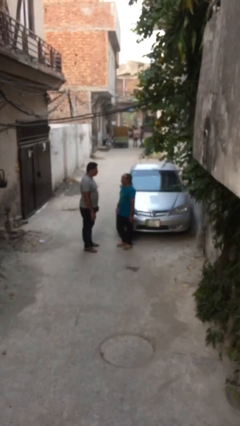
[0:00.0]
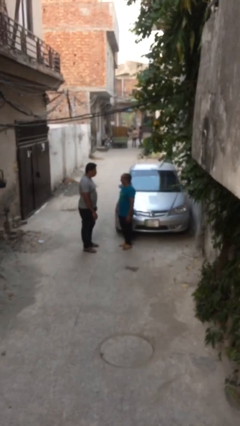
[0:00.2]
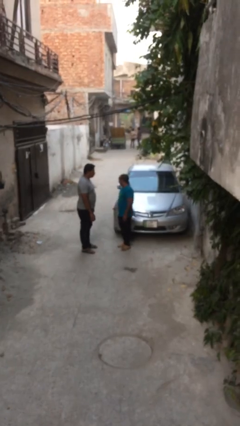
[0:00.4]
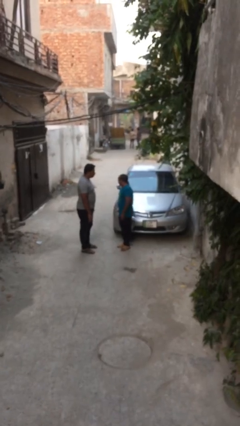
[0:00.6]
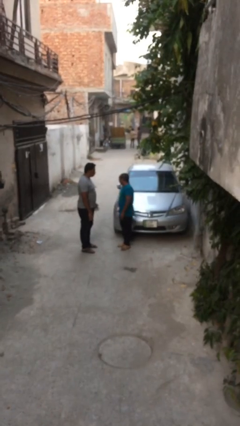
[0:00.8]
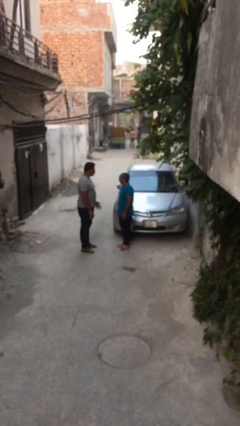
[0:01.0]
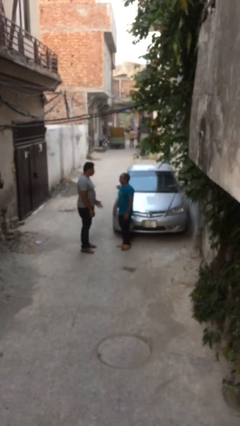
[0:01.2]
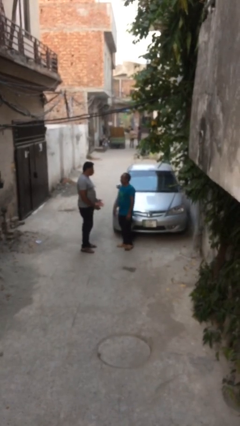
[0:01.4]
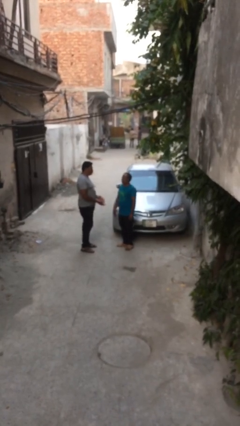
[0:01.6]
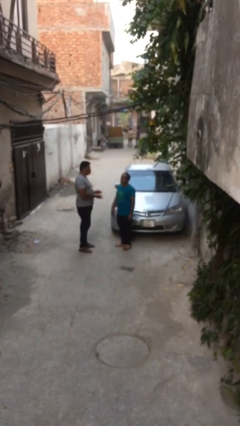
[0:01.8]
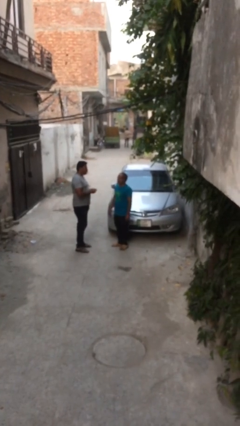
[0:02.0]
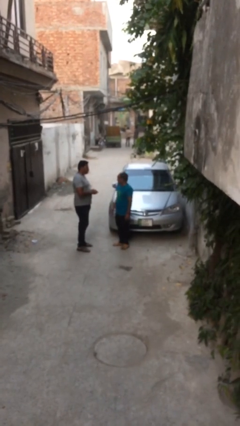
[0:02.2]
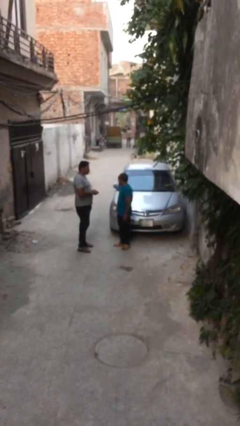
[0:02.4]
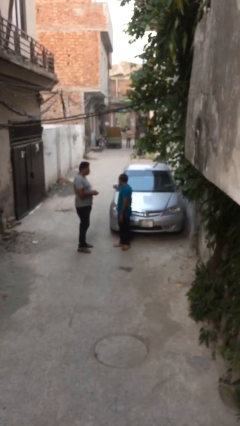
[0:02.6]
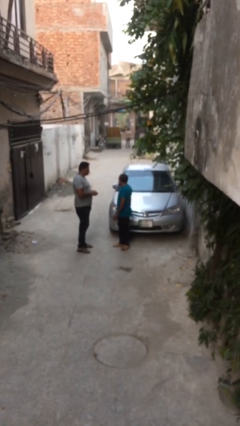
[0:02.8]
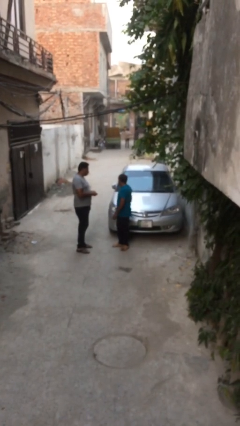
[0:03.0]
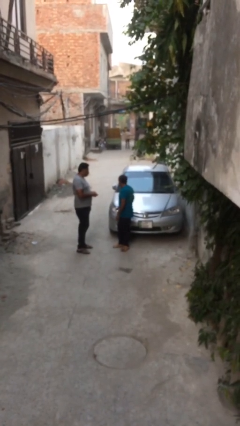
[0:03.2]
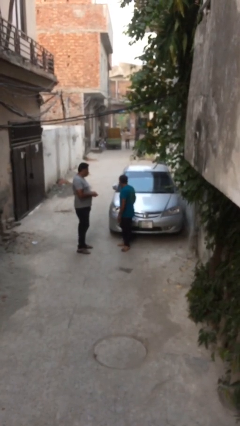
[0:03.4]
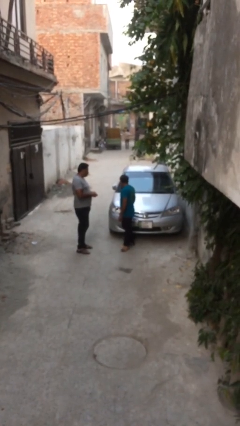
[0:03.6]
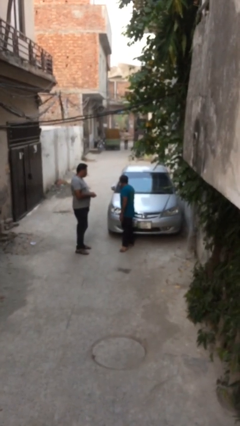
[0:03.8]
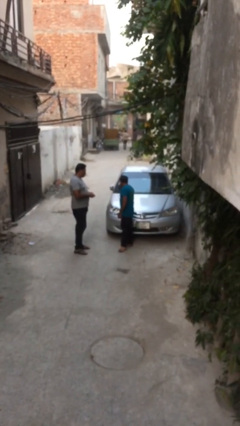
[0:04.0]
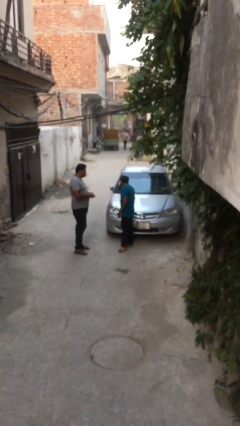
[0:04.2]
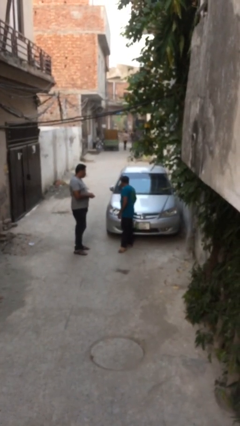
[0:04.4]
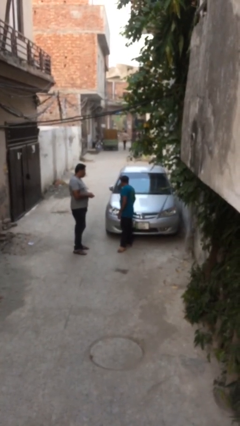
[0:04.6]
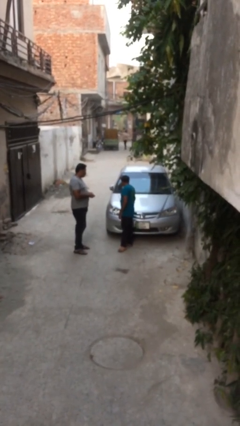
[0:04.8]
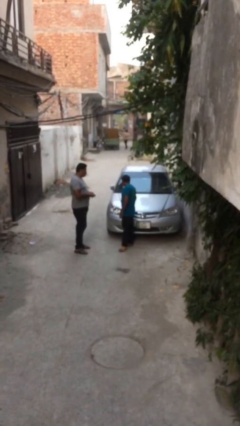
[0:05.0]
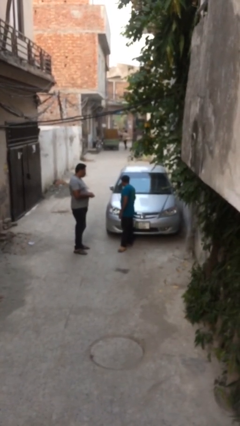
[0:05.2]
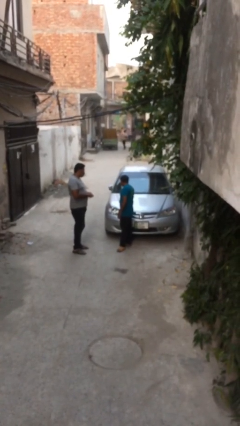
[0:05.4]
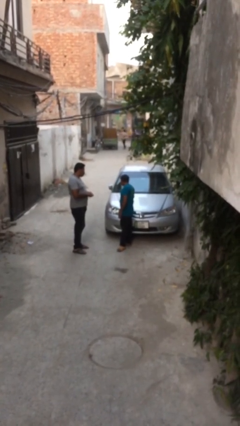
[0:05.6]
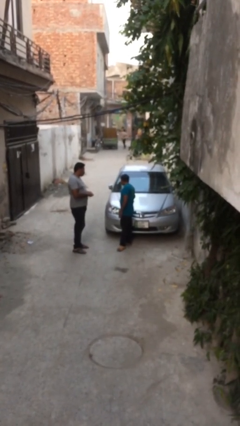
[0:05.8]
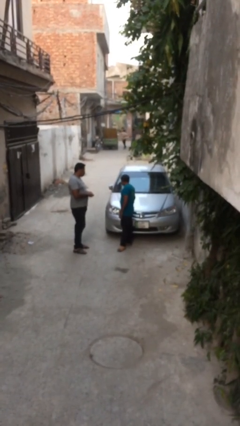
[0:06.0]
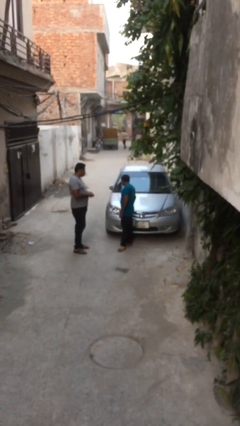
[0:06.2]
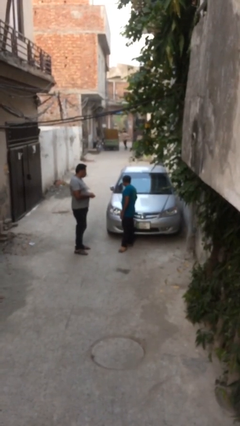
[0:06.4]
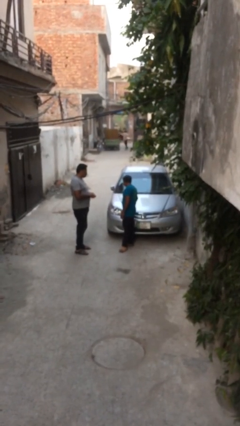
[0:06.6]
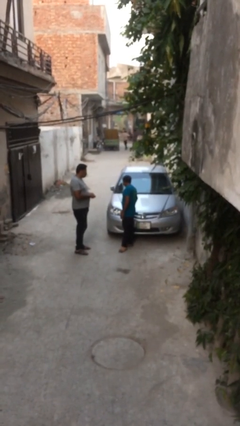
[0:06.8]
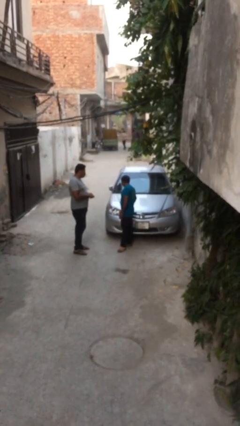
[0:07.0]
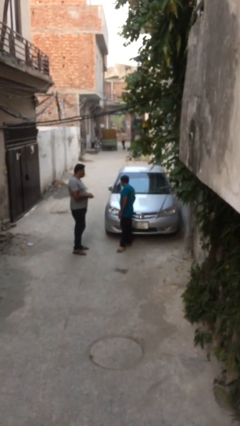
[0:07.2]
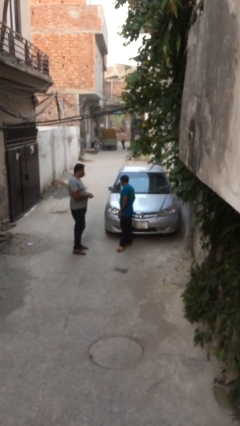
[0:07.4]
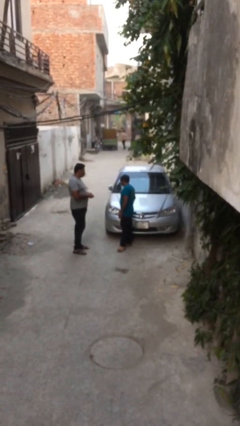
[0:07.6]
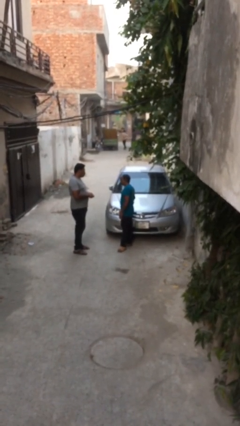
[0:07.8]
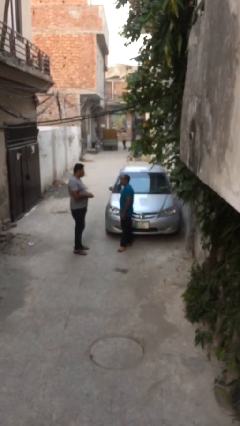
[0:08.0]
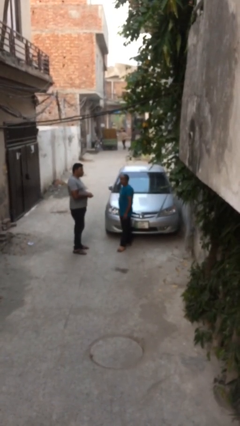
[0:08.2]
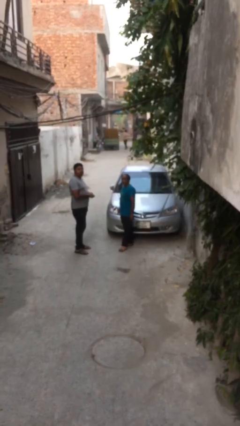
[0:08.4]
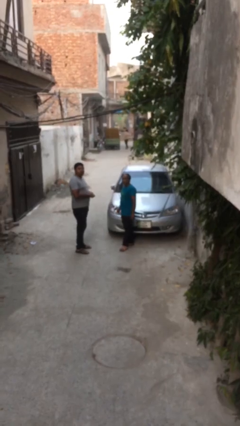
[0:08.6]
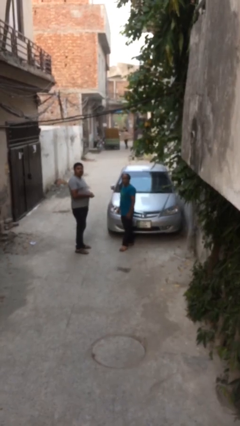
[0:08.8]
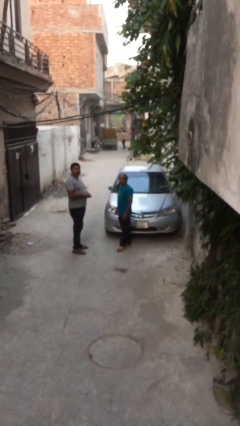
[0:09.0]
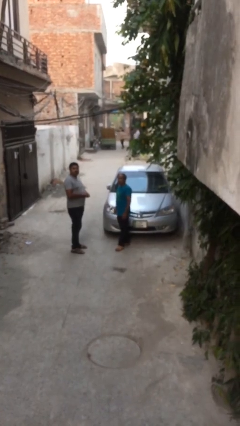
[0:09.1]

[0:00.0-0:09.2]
person talks to person

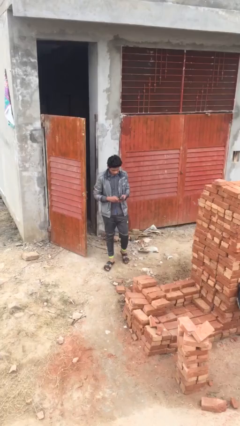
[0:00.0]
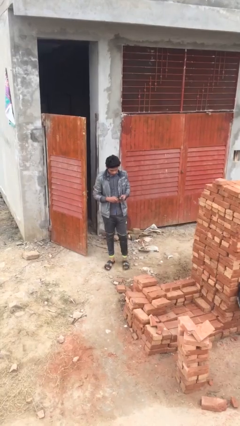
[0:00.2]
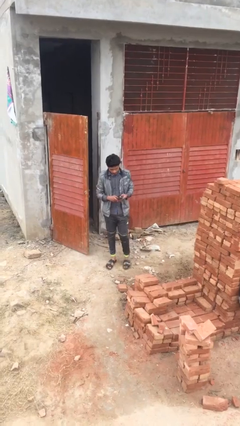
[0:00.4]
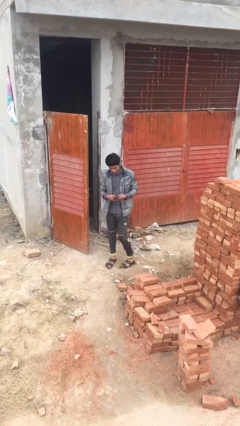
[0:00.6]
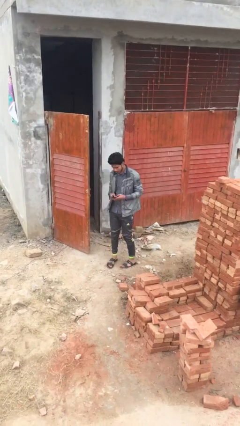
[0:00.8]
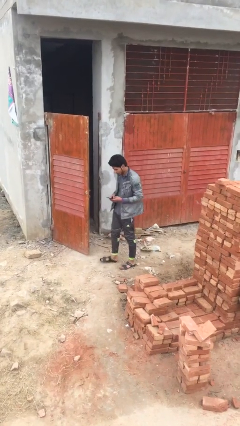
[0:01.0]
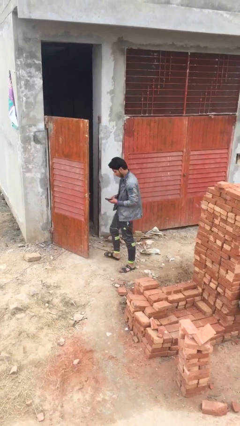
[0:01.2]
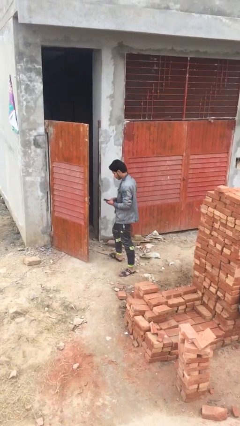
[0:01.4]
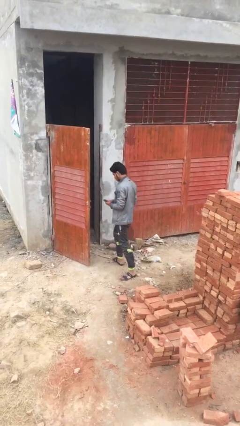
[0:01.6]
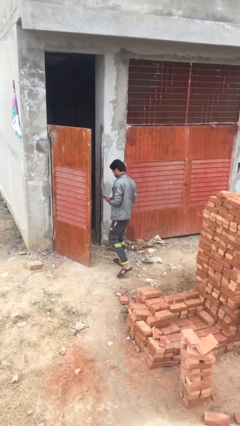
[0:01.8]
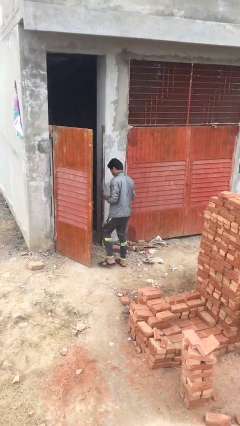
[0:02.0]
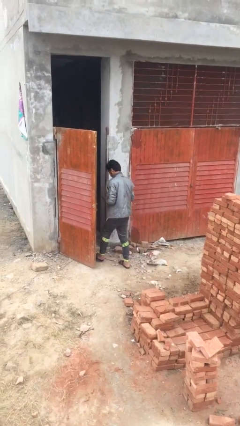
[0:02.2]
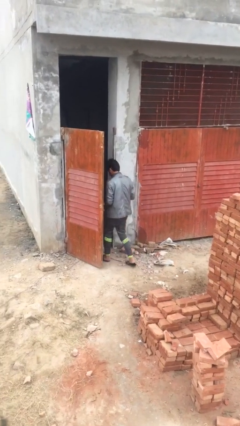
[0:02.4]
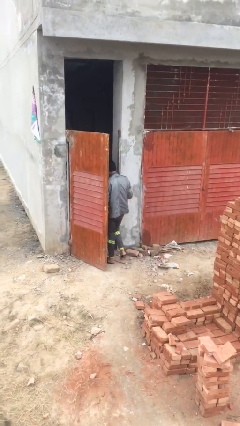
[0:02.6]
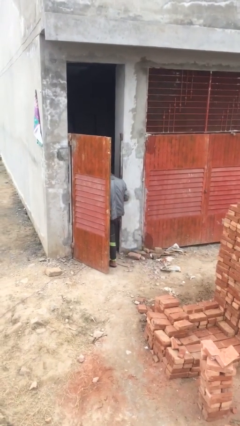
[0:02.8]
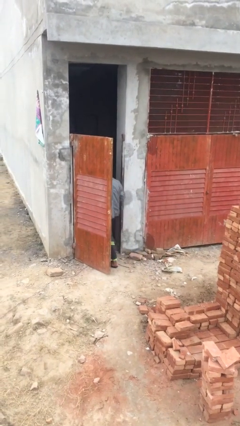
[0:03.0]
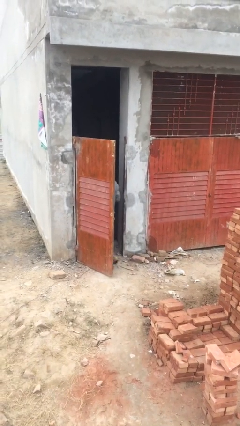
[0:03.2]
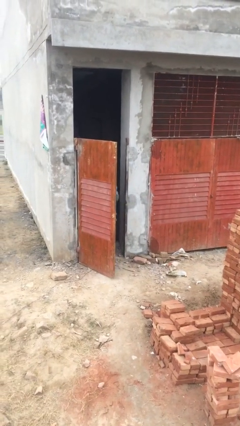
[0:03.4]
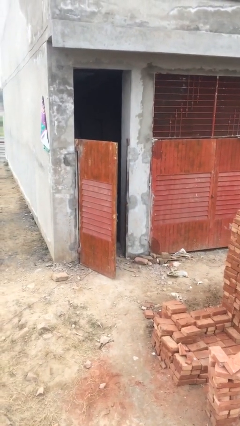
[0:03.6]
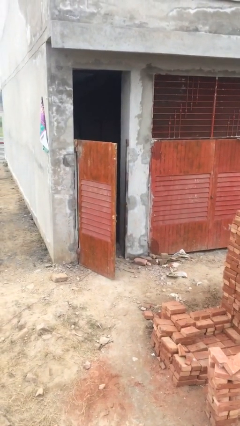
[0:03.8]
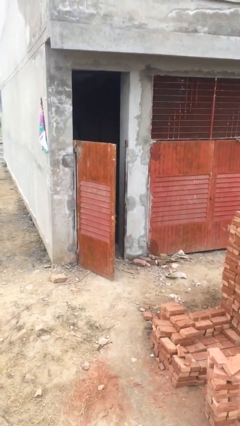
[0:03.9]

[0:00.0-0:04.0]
person exits scene through structure

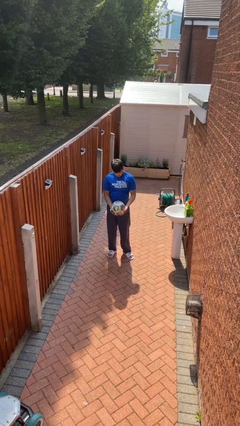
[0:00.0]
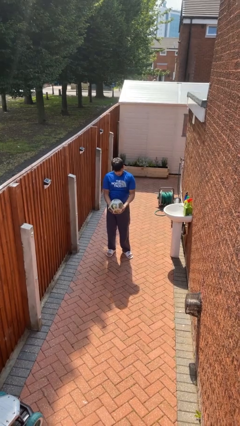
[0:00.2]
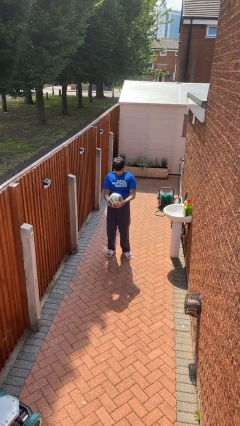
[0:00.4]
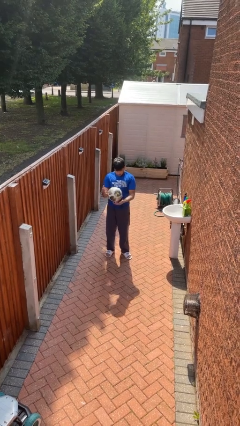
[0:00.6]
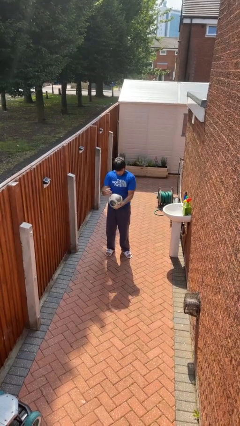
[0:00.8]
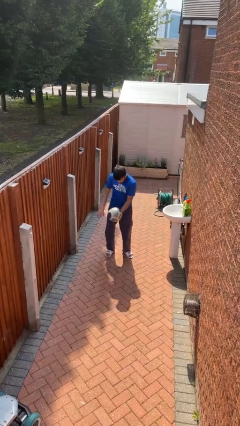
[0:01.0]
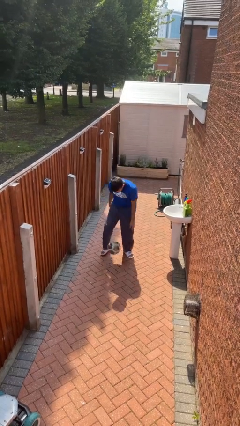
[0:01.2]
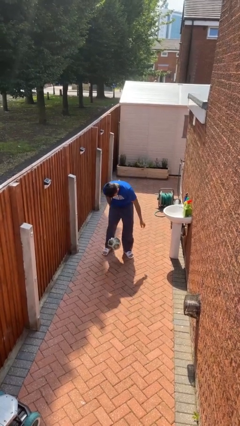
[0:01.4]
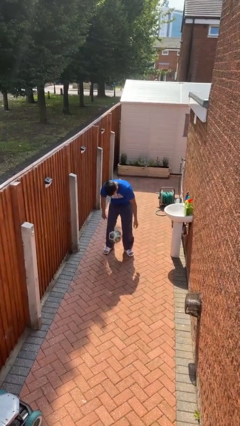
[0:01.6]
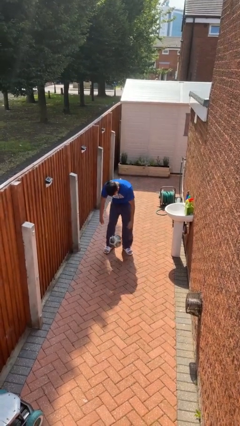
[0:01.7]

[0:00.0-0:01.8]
person drops object

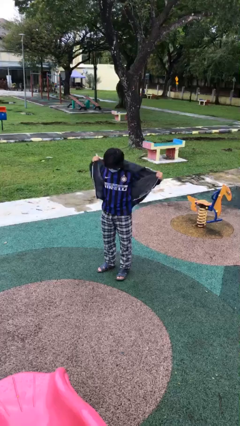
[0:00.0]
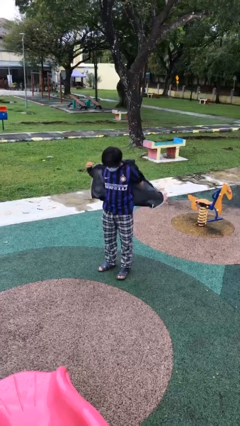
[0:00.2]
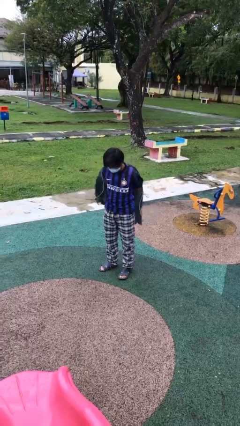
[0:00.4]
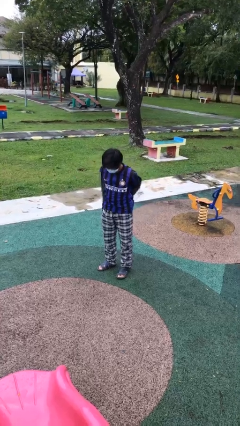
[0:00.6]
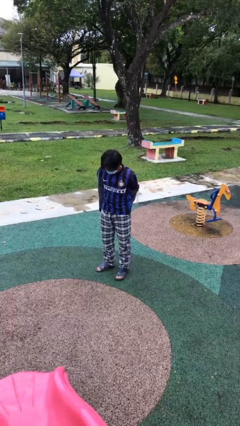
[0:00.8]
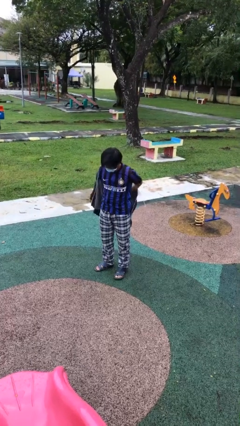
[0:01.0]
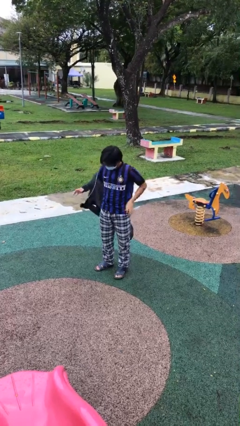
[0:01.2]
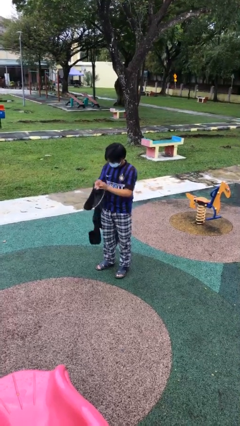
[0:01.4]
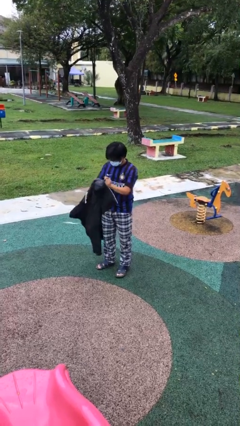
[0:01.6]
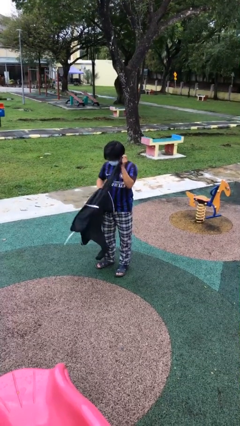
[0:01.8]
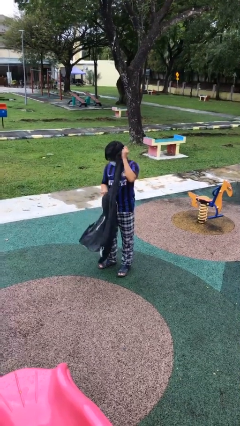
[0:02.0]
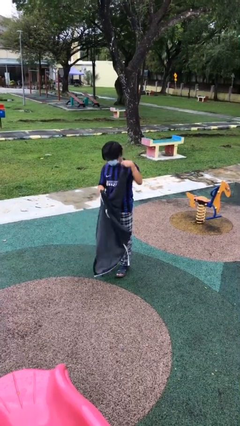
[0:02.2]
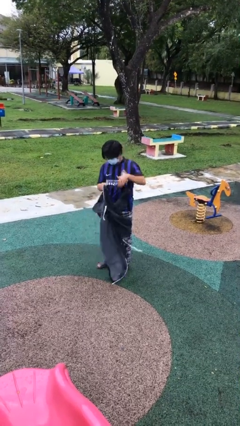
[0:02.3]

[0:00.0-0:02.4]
person takes off jacket

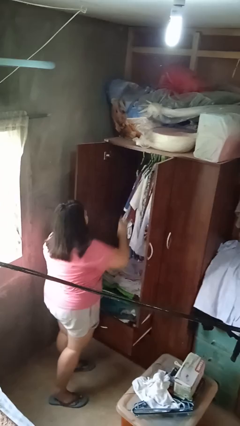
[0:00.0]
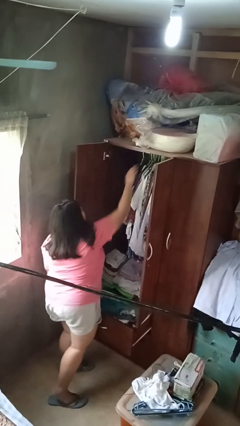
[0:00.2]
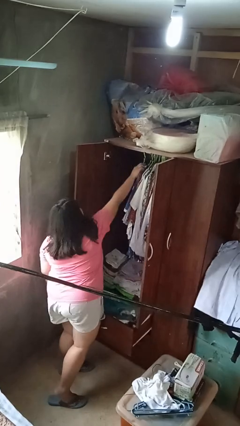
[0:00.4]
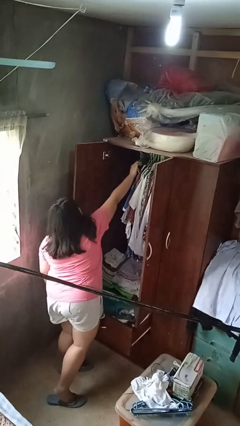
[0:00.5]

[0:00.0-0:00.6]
person takes clothes from closet
